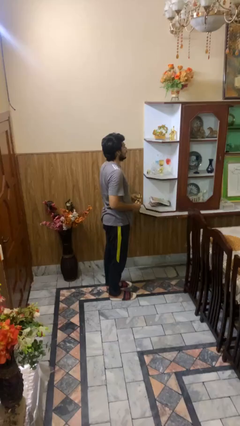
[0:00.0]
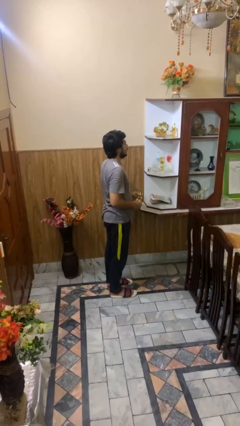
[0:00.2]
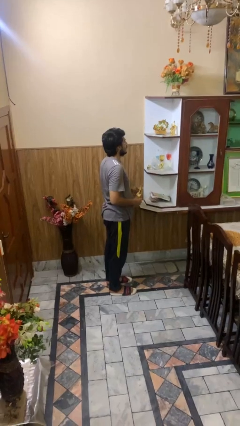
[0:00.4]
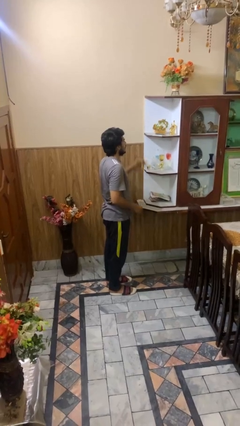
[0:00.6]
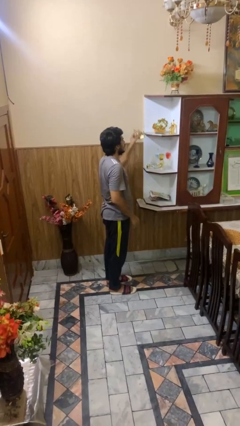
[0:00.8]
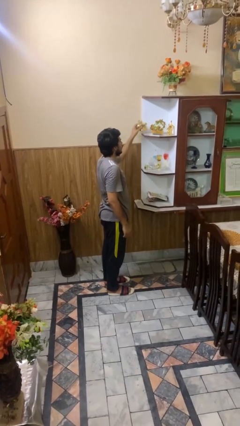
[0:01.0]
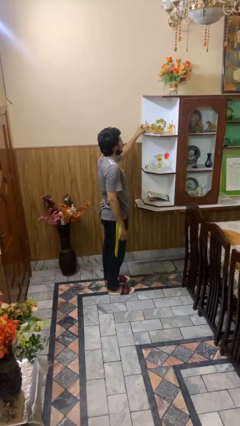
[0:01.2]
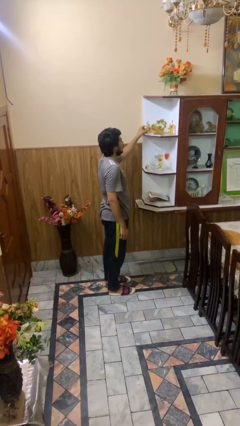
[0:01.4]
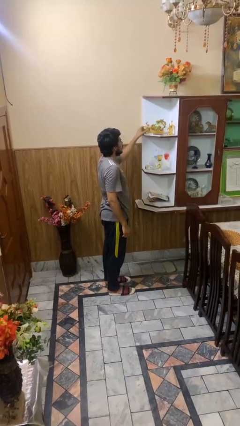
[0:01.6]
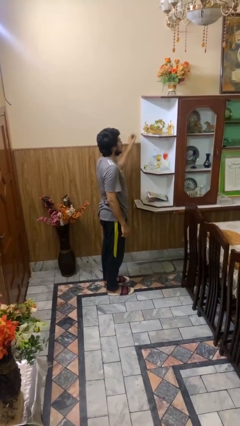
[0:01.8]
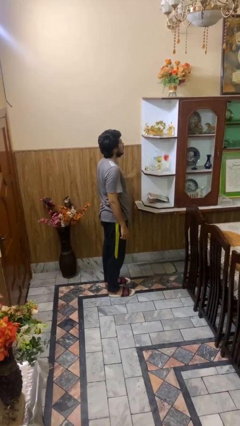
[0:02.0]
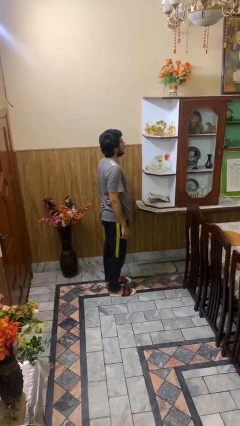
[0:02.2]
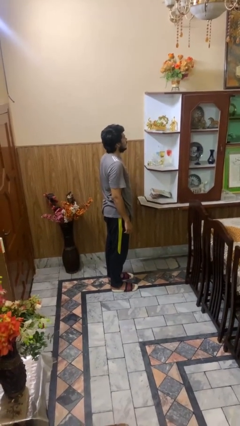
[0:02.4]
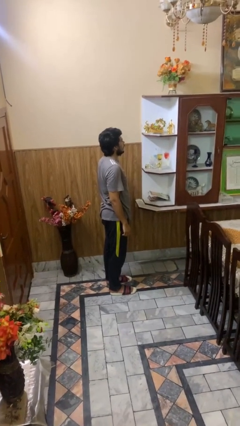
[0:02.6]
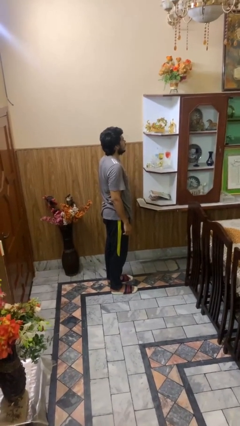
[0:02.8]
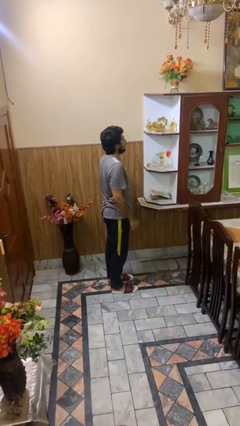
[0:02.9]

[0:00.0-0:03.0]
person puts down object on shelf

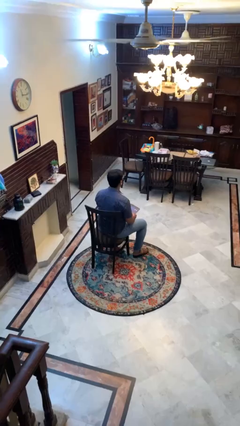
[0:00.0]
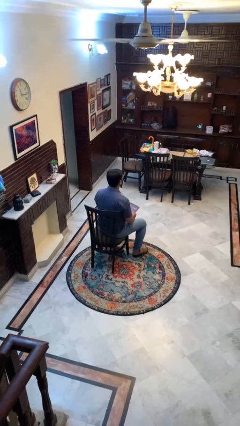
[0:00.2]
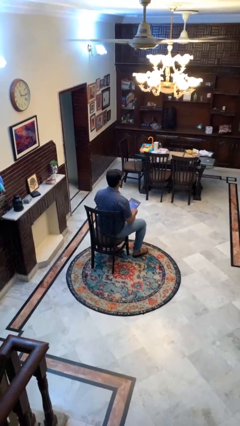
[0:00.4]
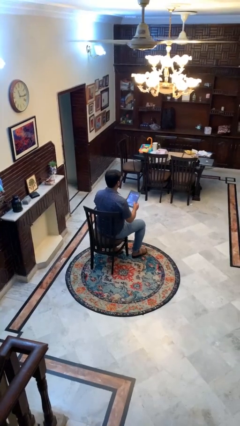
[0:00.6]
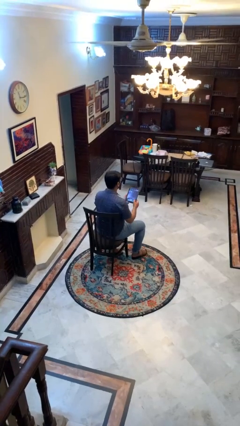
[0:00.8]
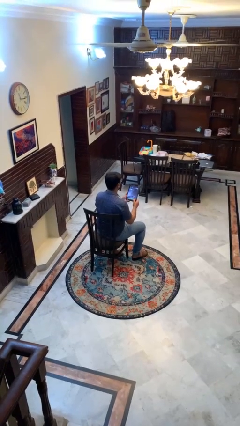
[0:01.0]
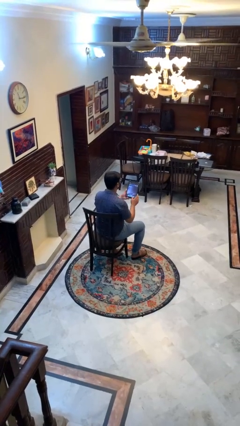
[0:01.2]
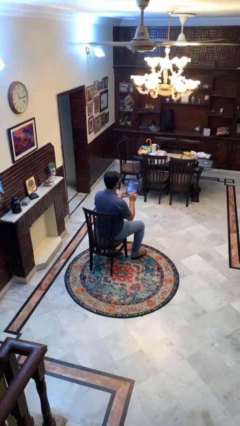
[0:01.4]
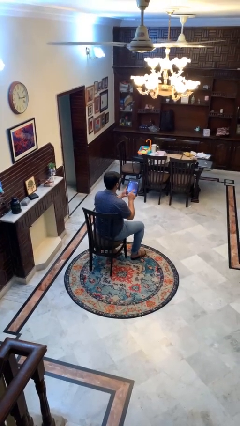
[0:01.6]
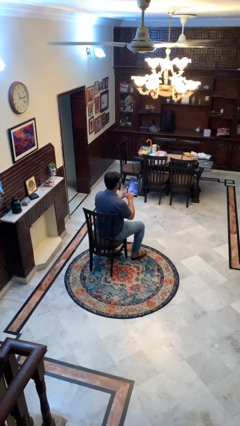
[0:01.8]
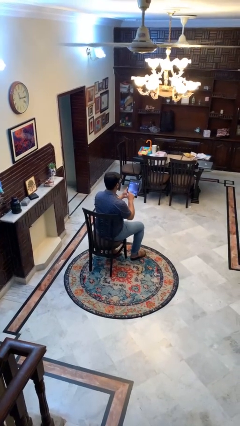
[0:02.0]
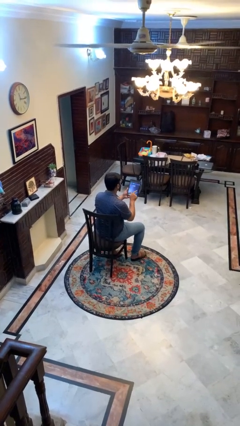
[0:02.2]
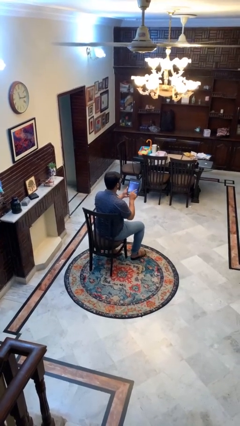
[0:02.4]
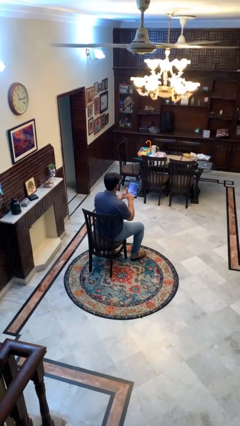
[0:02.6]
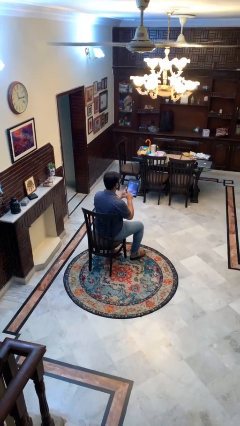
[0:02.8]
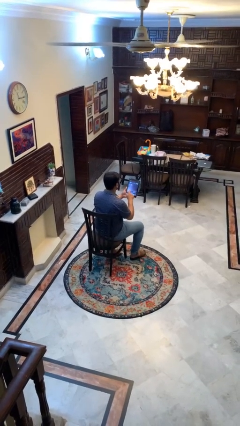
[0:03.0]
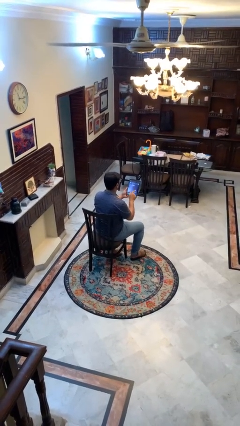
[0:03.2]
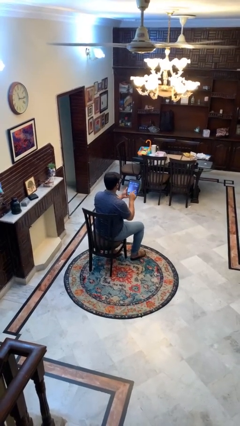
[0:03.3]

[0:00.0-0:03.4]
person interacts with tablet

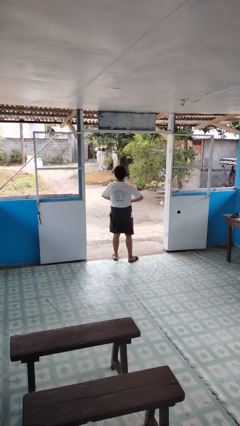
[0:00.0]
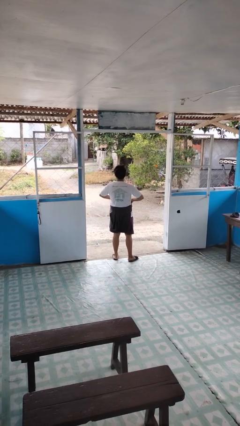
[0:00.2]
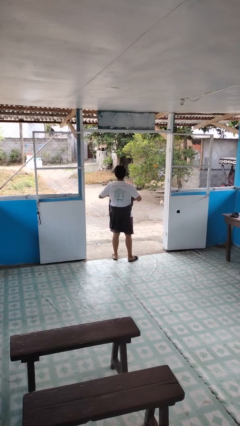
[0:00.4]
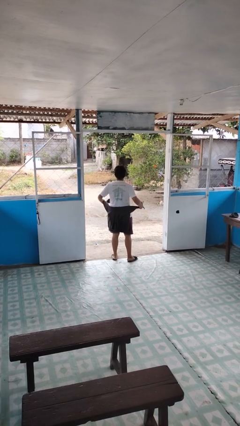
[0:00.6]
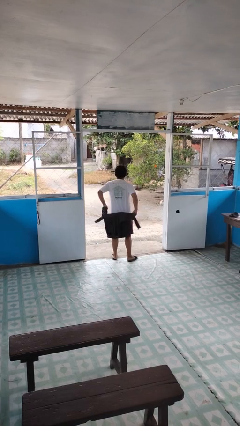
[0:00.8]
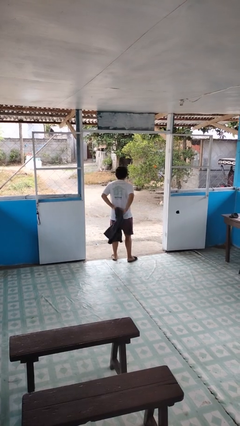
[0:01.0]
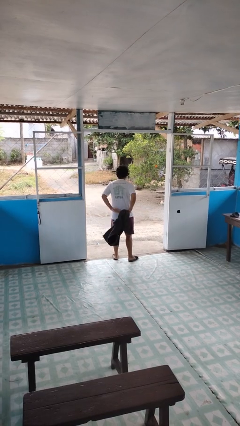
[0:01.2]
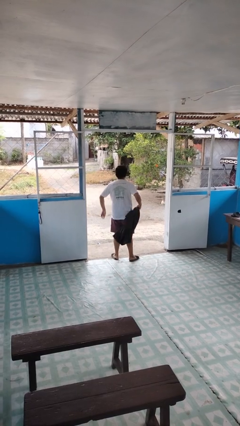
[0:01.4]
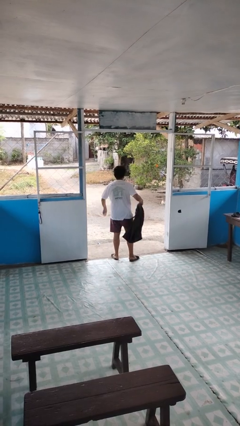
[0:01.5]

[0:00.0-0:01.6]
person unties jacket around waist

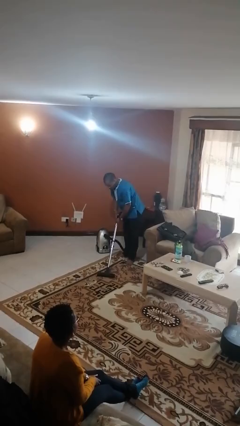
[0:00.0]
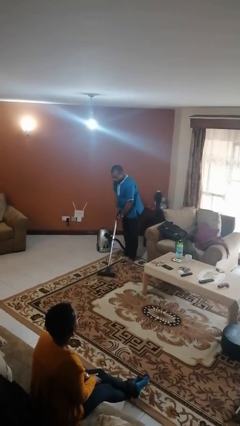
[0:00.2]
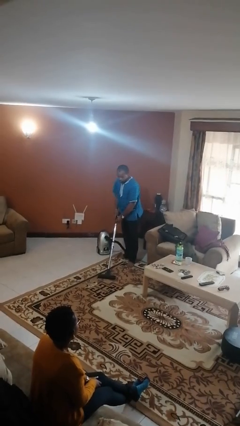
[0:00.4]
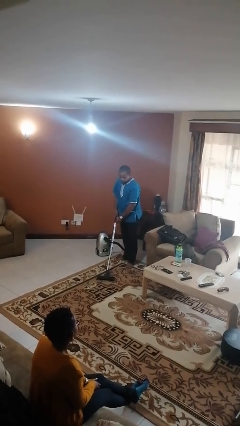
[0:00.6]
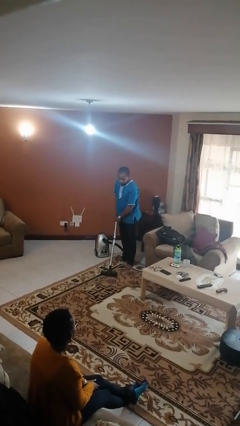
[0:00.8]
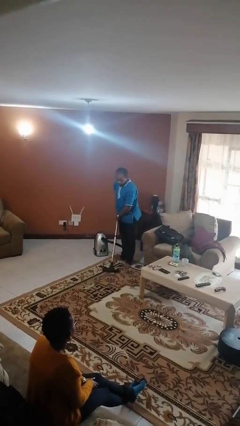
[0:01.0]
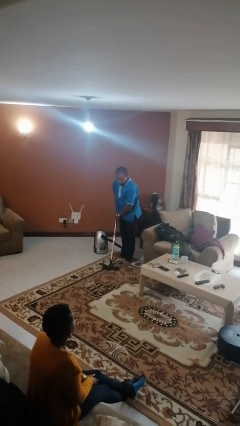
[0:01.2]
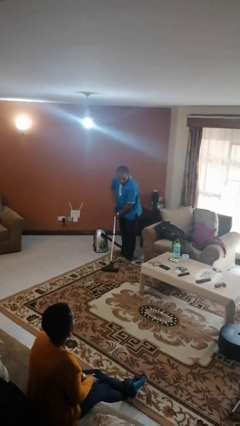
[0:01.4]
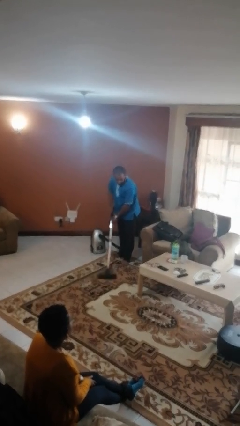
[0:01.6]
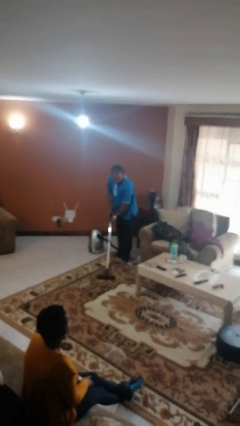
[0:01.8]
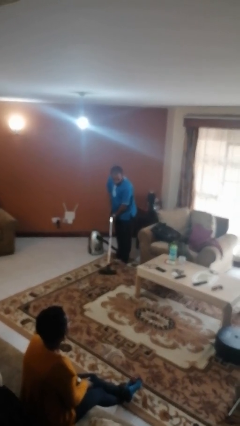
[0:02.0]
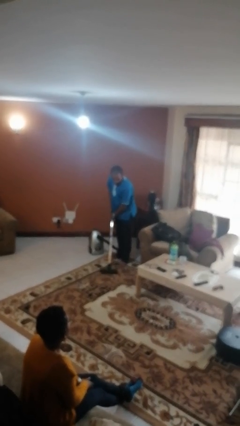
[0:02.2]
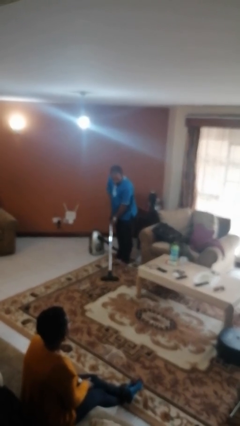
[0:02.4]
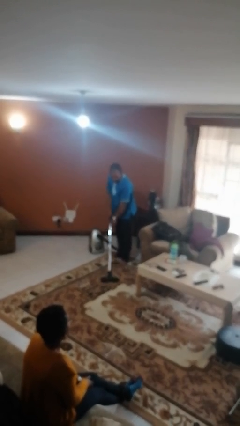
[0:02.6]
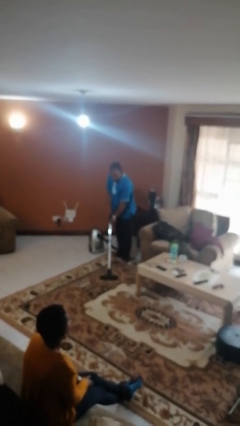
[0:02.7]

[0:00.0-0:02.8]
person vacuums carpet

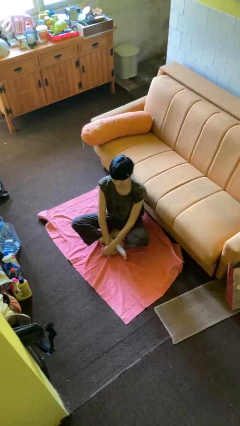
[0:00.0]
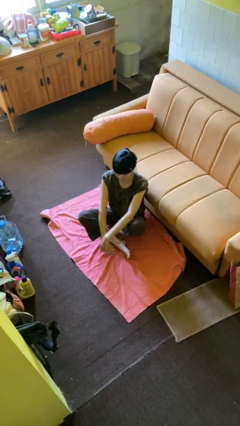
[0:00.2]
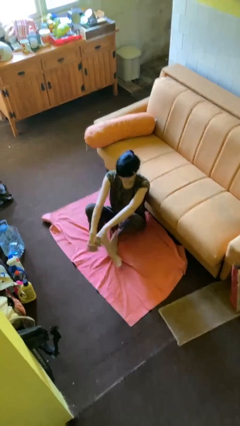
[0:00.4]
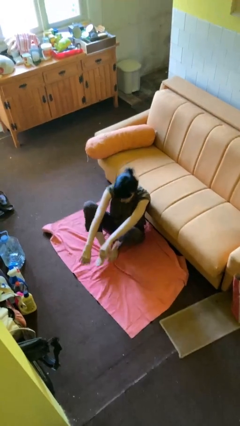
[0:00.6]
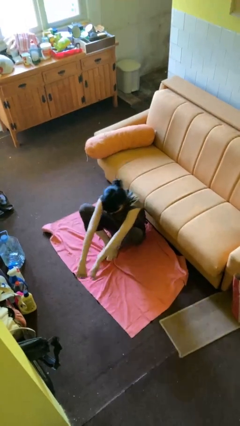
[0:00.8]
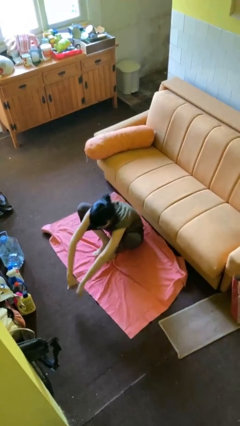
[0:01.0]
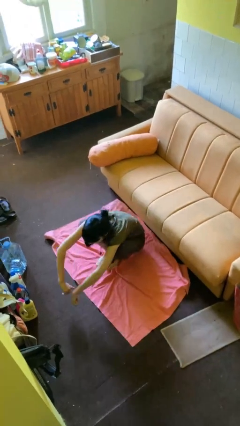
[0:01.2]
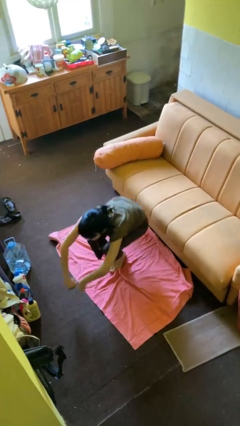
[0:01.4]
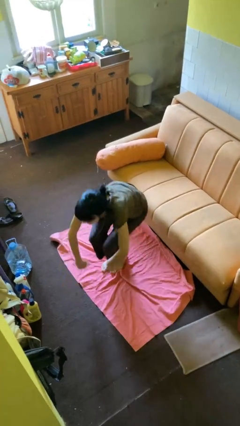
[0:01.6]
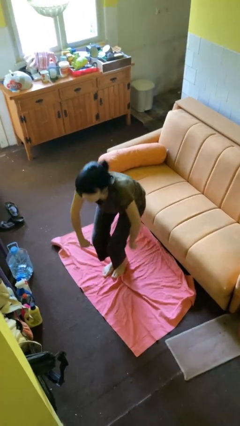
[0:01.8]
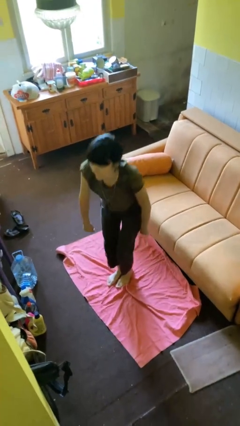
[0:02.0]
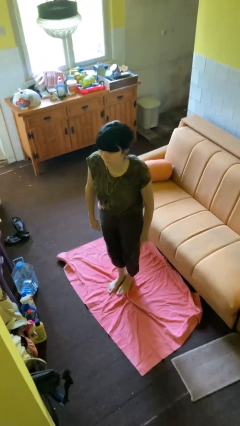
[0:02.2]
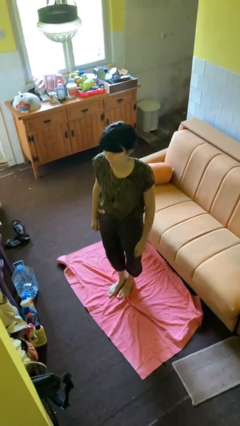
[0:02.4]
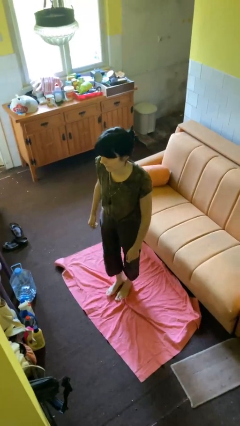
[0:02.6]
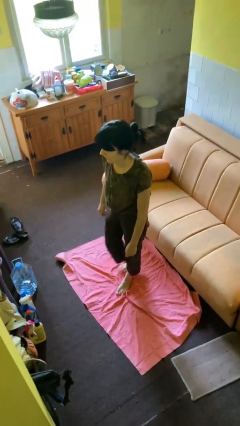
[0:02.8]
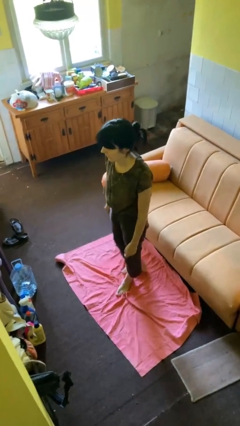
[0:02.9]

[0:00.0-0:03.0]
person stands up from floor

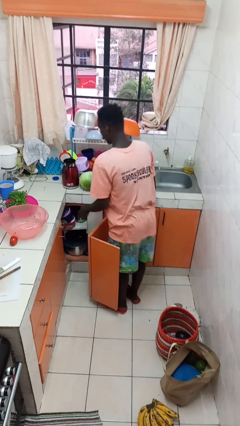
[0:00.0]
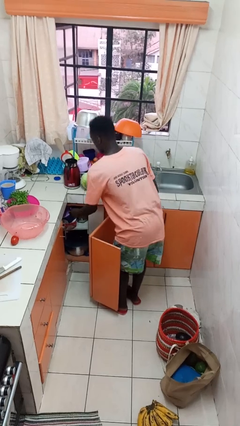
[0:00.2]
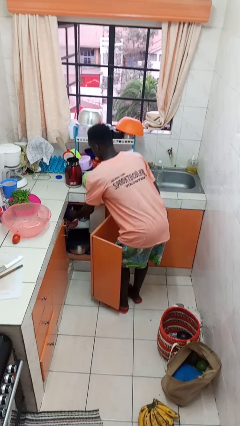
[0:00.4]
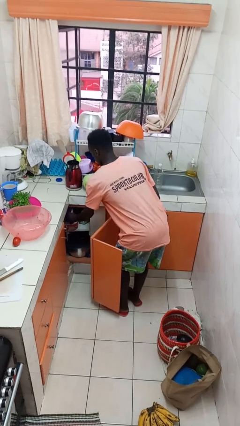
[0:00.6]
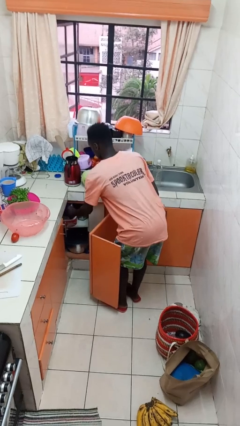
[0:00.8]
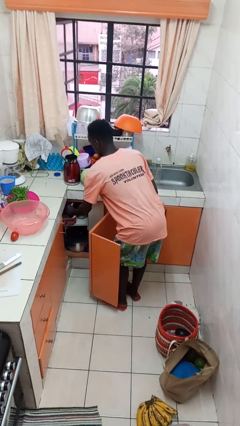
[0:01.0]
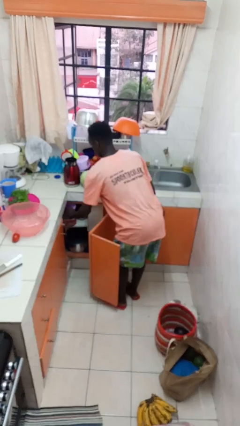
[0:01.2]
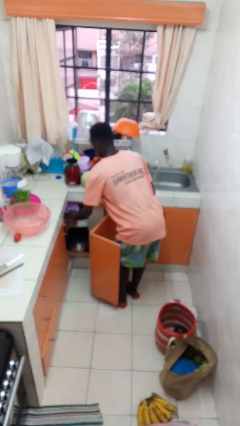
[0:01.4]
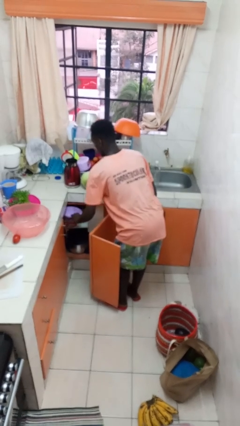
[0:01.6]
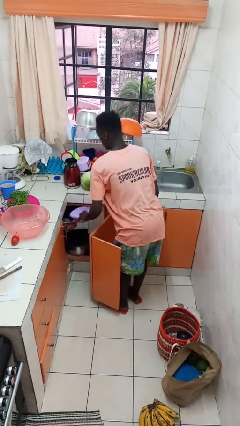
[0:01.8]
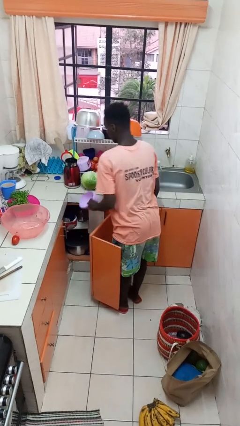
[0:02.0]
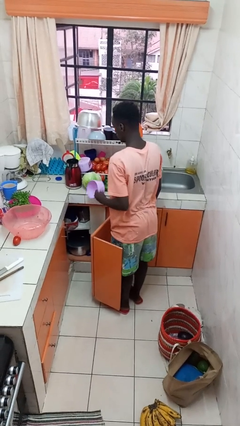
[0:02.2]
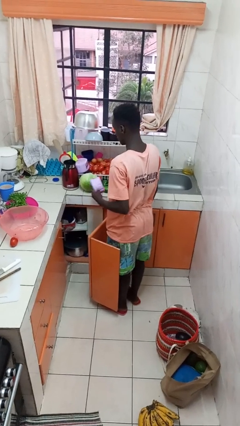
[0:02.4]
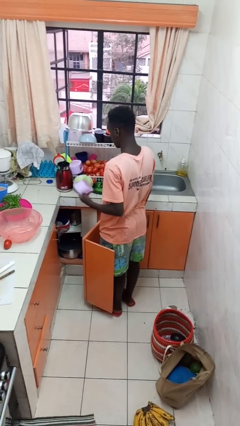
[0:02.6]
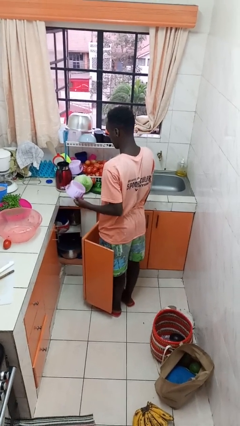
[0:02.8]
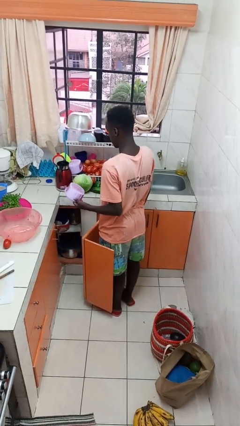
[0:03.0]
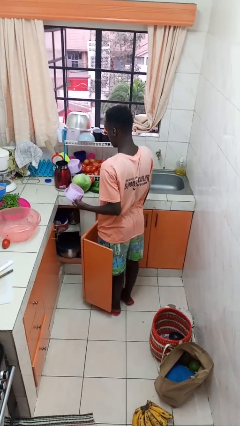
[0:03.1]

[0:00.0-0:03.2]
person takes object from cabinet

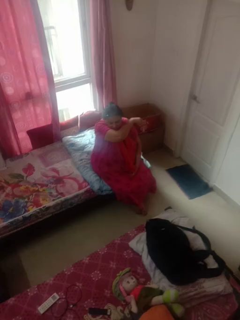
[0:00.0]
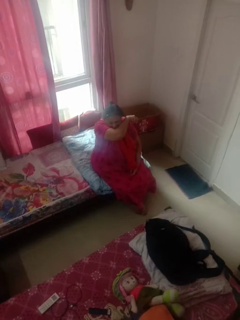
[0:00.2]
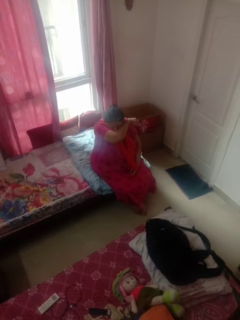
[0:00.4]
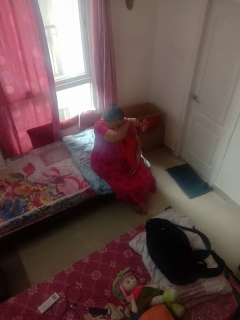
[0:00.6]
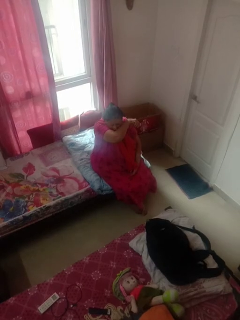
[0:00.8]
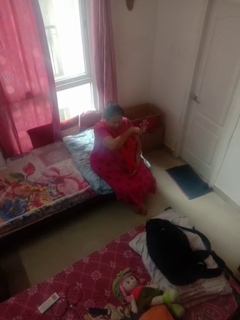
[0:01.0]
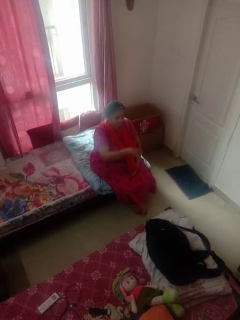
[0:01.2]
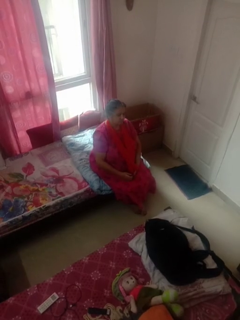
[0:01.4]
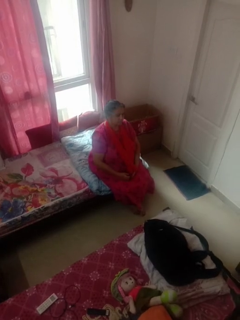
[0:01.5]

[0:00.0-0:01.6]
person sneezes into arm
